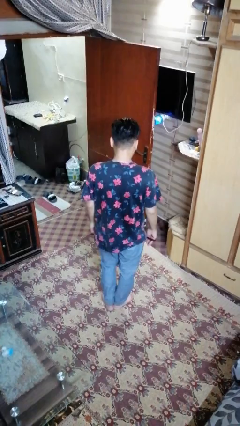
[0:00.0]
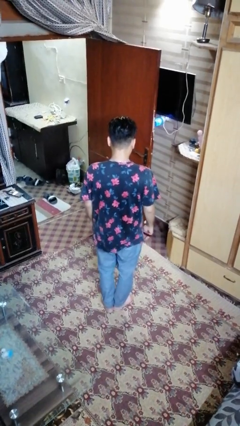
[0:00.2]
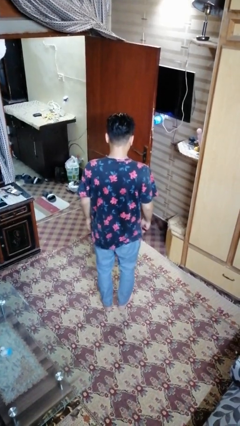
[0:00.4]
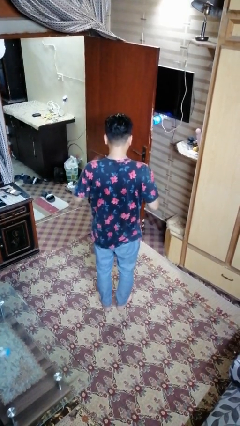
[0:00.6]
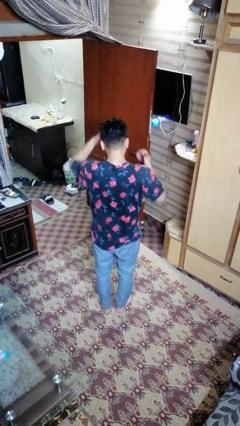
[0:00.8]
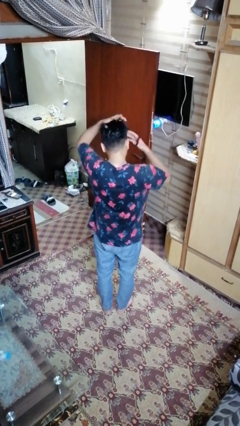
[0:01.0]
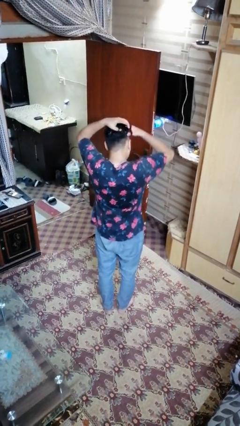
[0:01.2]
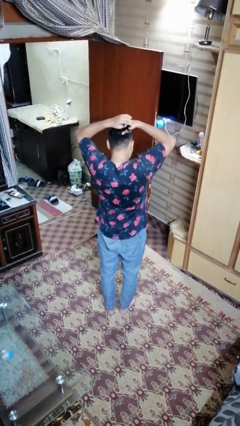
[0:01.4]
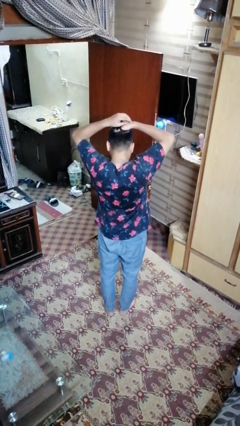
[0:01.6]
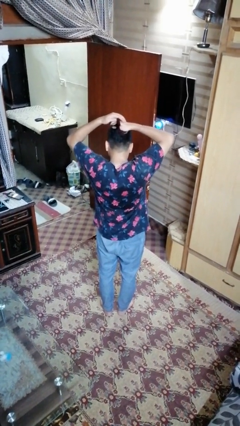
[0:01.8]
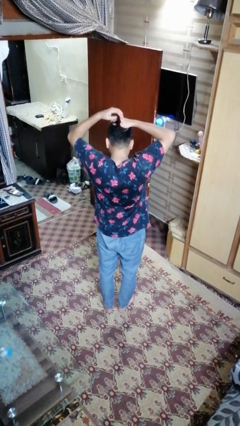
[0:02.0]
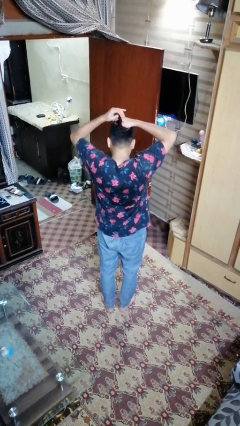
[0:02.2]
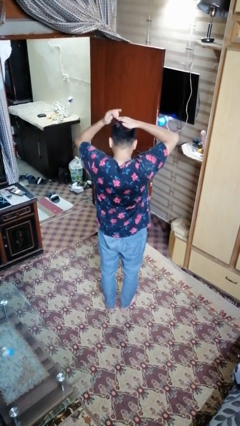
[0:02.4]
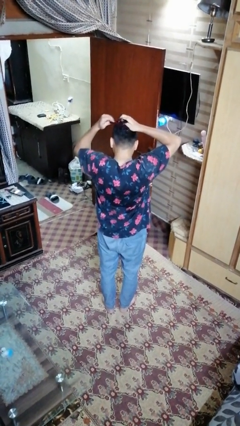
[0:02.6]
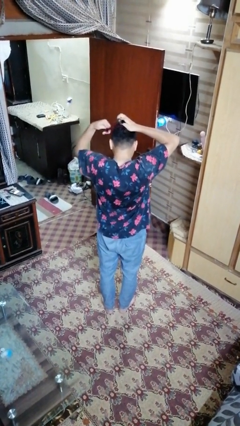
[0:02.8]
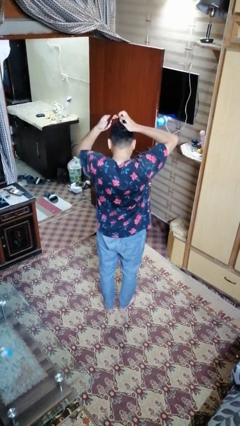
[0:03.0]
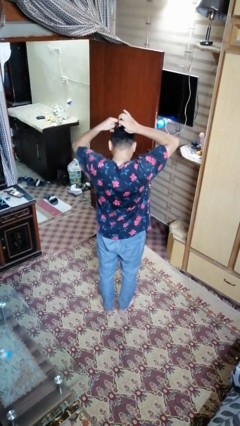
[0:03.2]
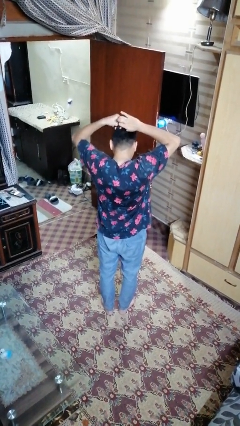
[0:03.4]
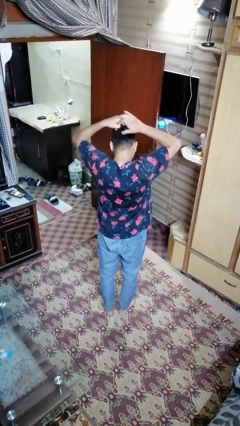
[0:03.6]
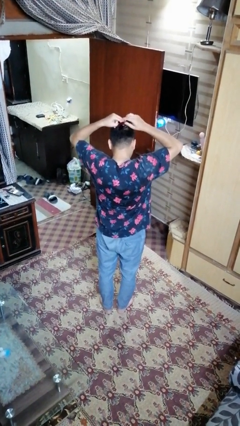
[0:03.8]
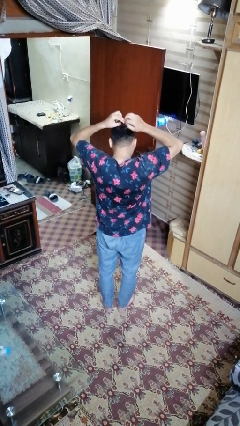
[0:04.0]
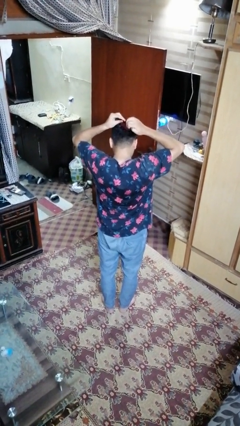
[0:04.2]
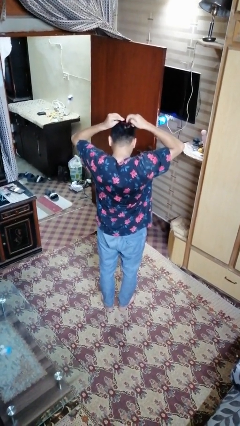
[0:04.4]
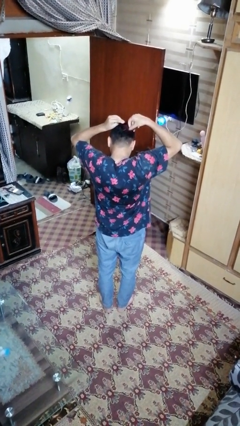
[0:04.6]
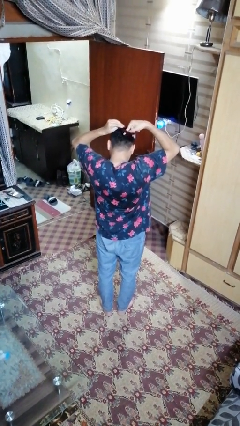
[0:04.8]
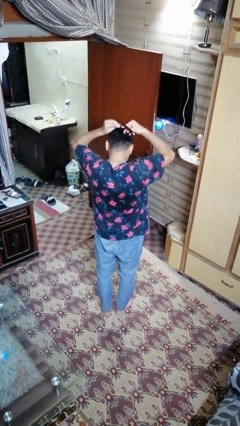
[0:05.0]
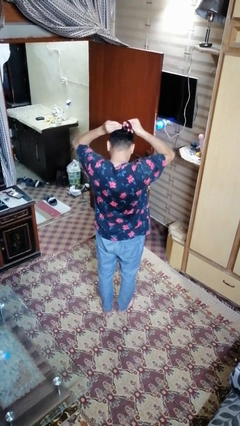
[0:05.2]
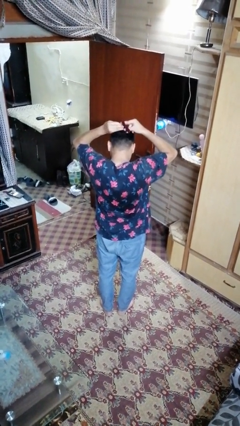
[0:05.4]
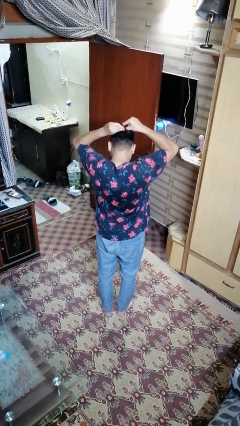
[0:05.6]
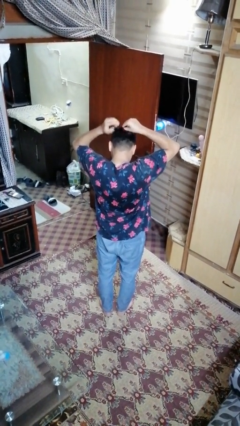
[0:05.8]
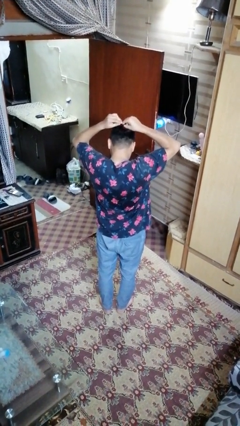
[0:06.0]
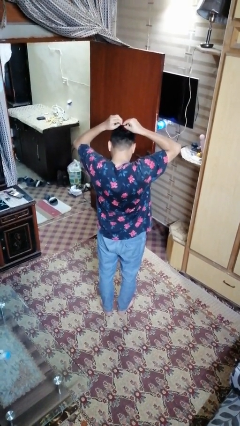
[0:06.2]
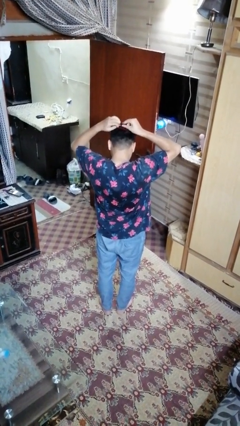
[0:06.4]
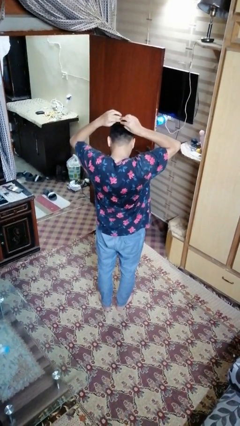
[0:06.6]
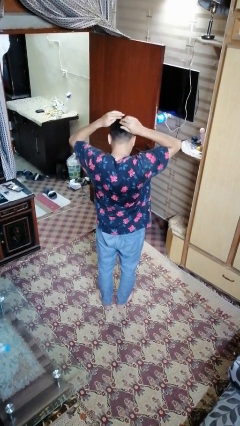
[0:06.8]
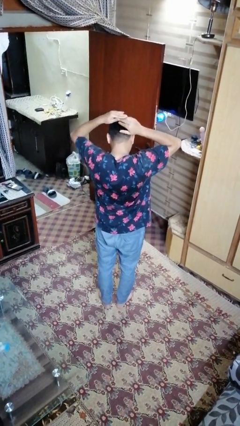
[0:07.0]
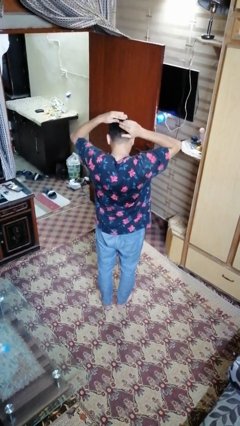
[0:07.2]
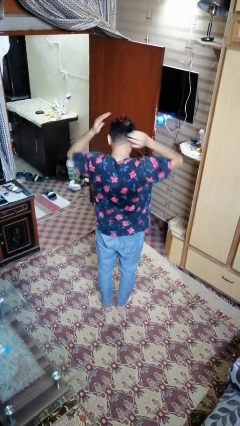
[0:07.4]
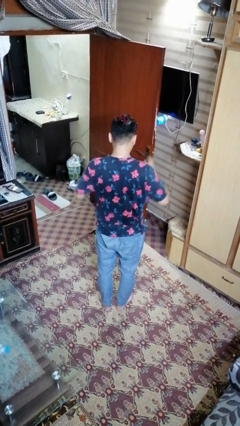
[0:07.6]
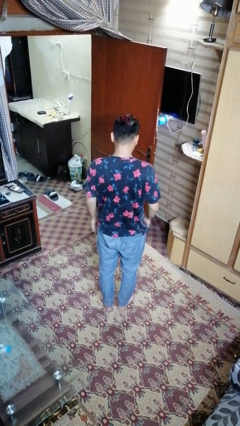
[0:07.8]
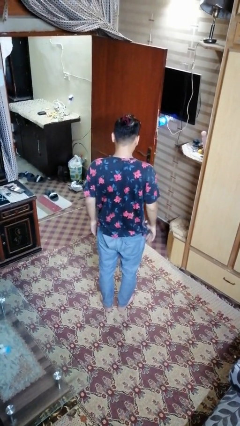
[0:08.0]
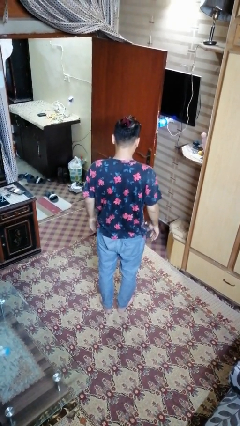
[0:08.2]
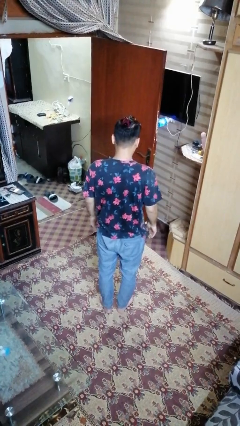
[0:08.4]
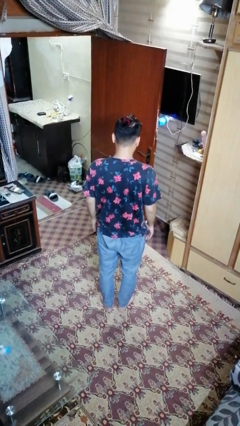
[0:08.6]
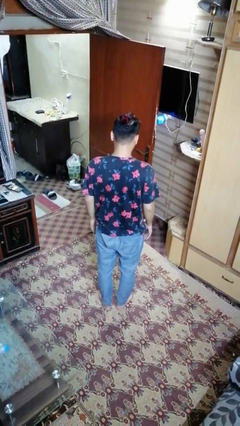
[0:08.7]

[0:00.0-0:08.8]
person puts hair in ponytail

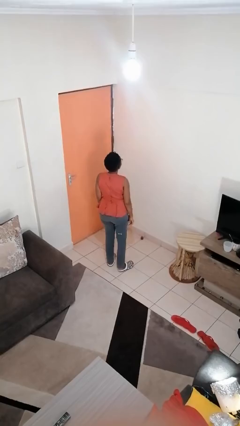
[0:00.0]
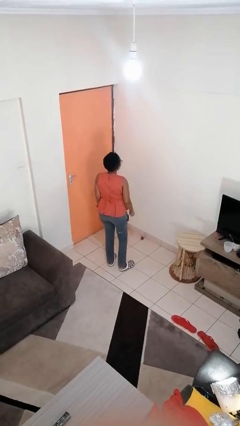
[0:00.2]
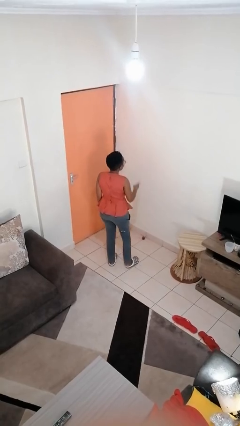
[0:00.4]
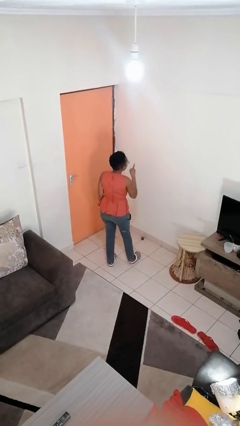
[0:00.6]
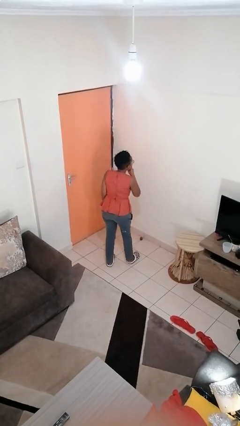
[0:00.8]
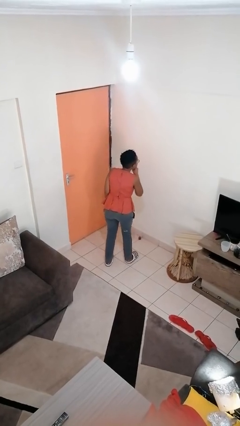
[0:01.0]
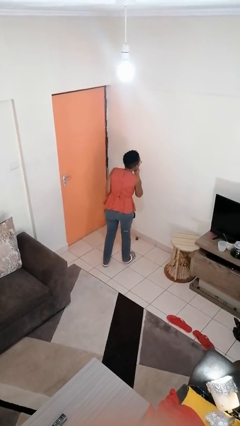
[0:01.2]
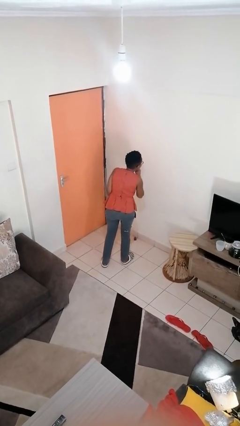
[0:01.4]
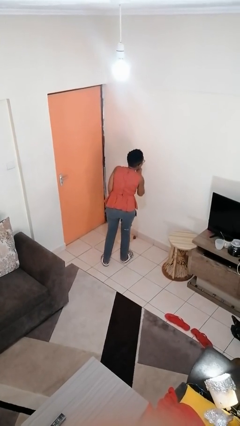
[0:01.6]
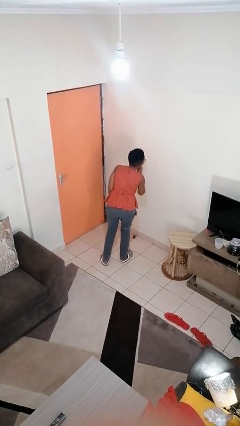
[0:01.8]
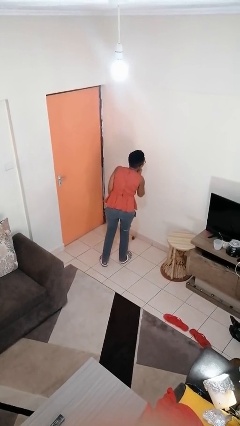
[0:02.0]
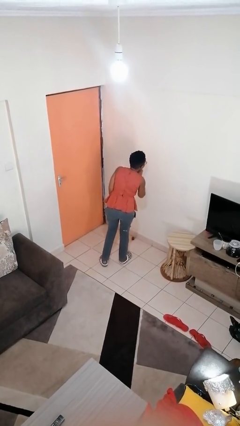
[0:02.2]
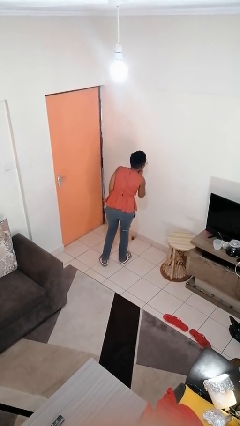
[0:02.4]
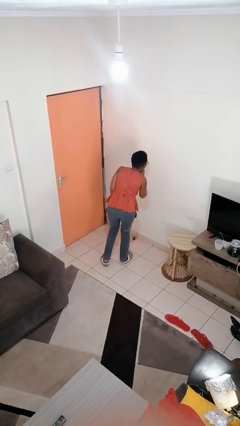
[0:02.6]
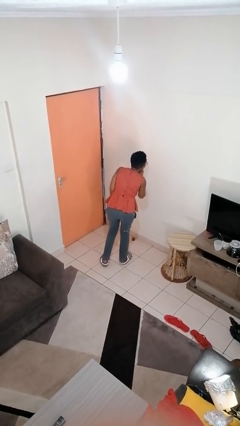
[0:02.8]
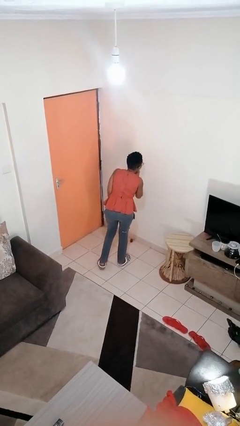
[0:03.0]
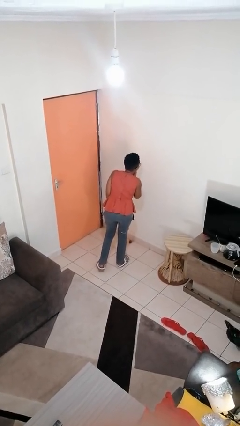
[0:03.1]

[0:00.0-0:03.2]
person gestures be quiet

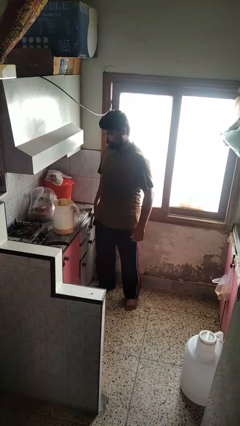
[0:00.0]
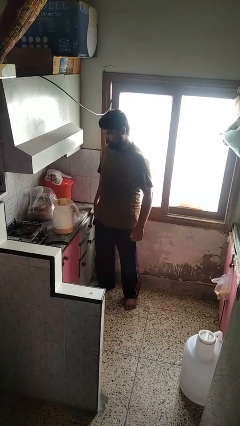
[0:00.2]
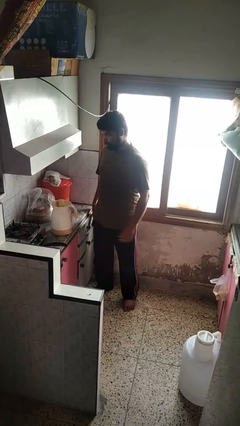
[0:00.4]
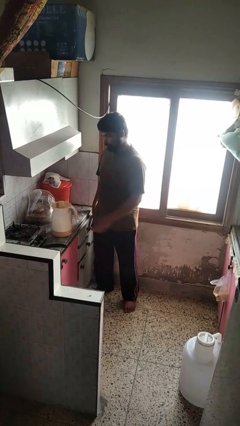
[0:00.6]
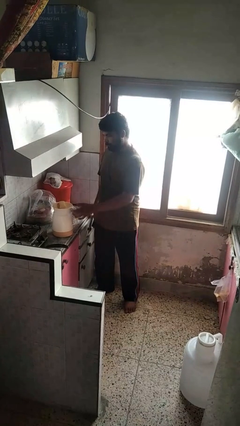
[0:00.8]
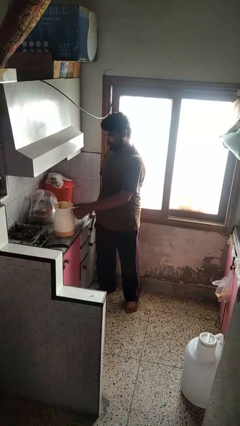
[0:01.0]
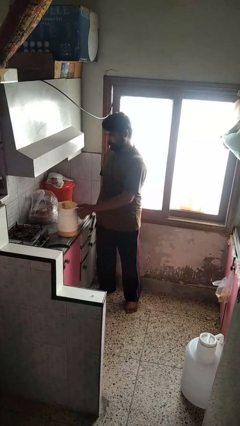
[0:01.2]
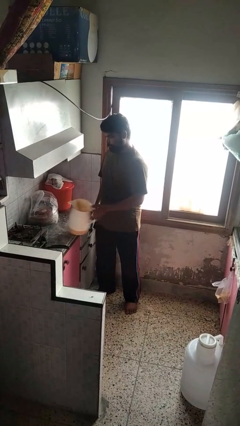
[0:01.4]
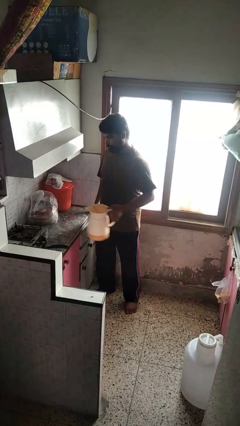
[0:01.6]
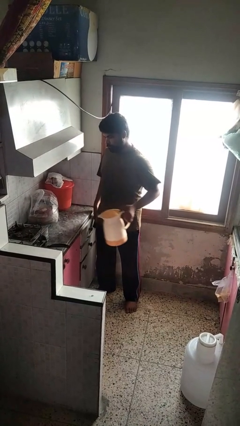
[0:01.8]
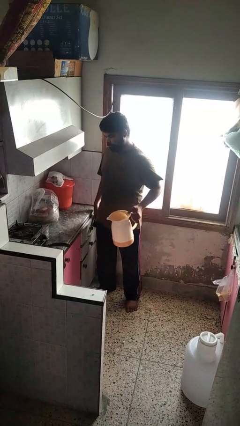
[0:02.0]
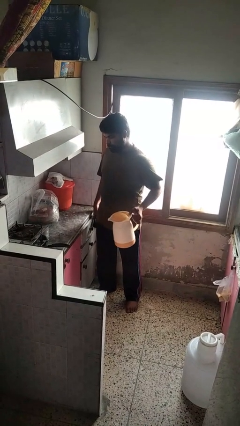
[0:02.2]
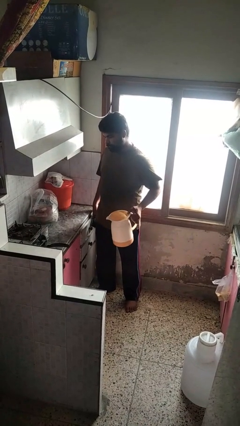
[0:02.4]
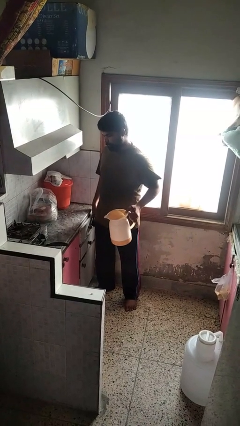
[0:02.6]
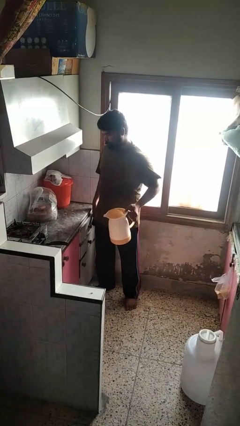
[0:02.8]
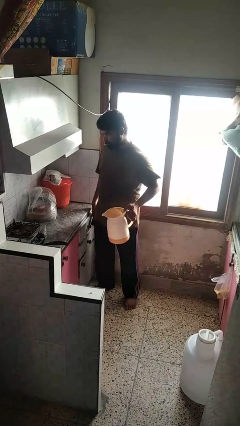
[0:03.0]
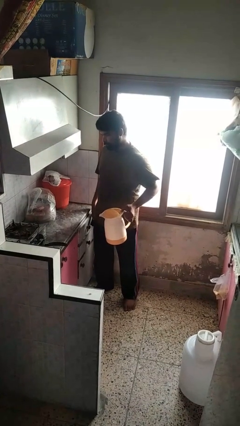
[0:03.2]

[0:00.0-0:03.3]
person picks up object from countertop

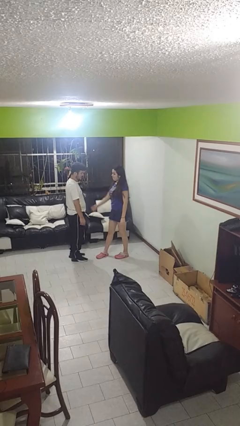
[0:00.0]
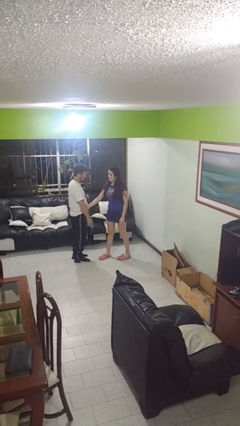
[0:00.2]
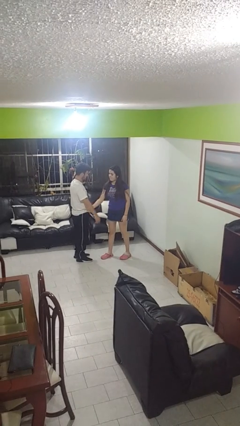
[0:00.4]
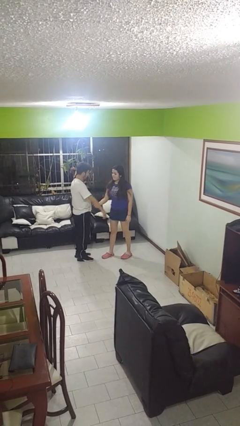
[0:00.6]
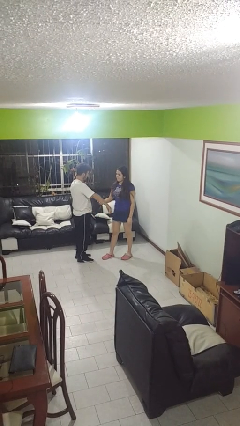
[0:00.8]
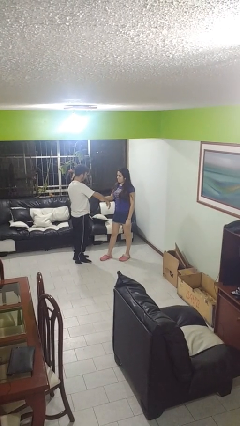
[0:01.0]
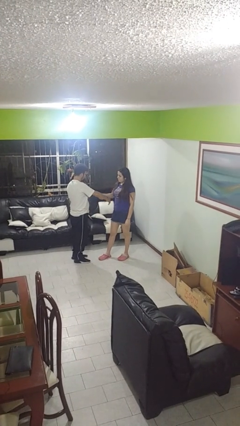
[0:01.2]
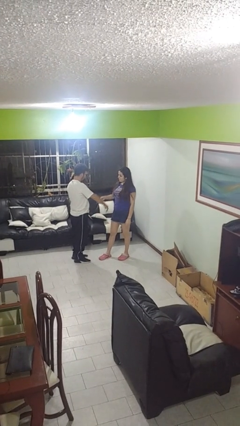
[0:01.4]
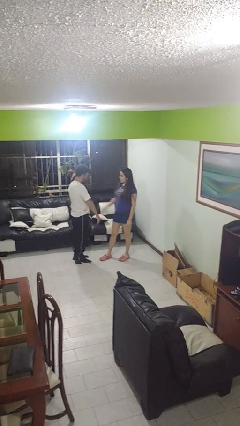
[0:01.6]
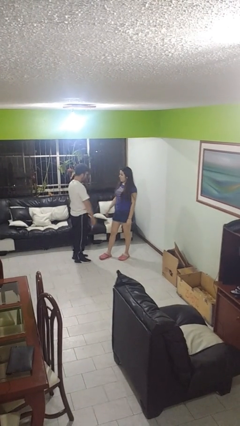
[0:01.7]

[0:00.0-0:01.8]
person grabs person by forearm

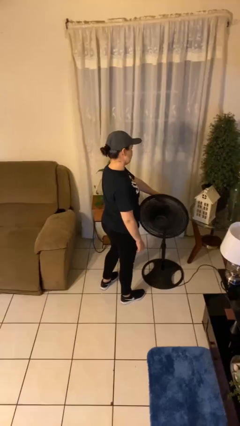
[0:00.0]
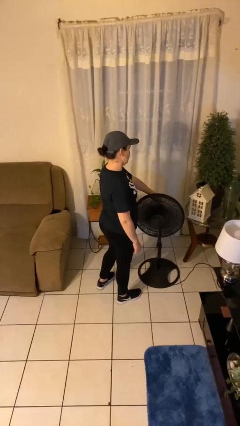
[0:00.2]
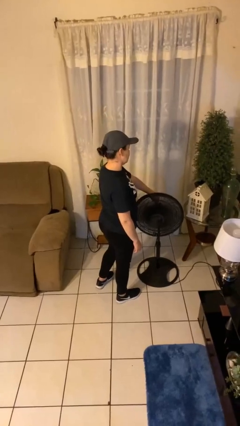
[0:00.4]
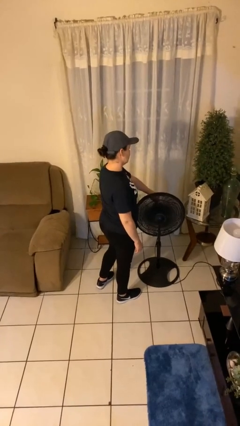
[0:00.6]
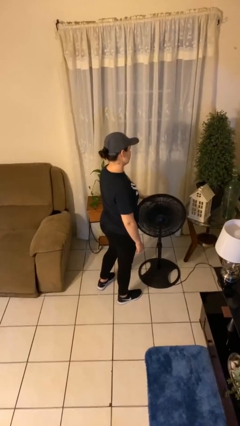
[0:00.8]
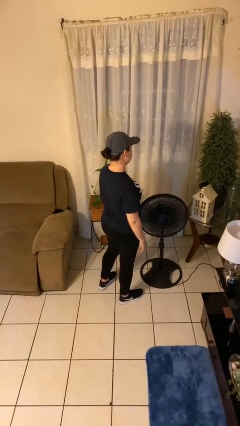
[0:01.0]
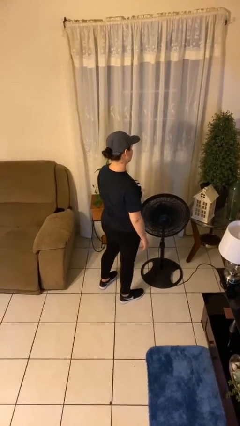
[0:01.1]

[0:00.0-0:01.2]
person turns off fan
